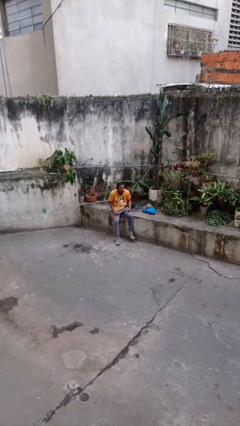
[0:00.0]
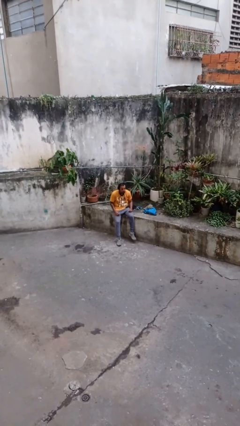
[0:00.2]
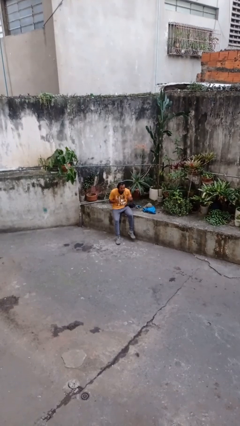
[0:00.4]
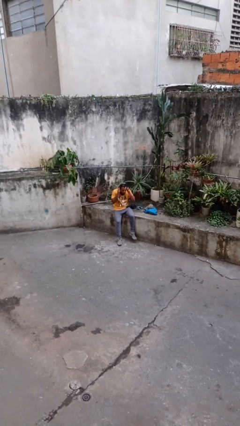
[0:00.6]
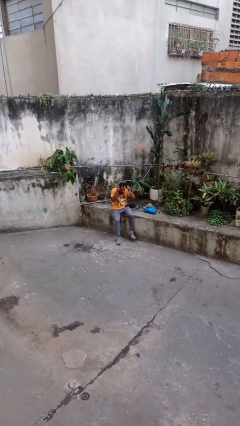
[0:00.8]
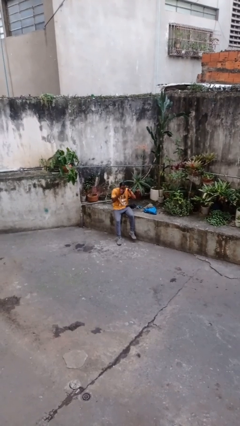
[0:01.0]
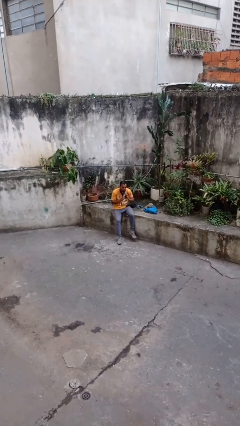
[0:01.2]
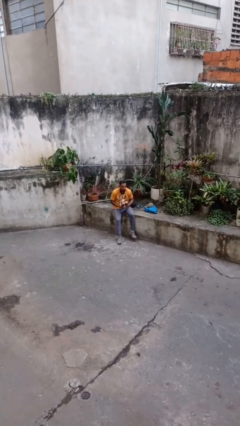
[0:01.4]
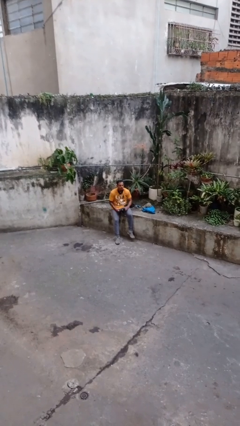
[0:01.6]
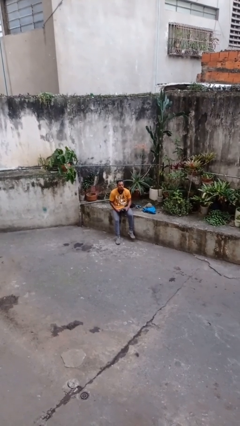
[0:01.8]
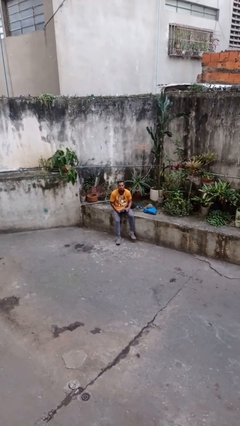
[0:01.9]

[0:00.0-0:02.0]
person takes off headphones

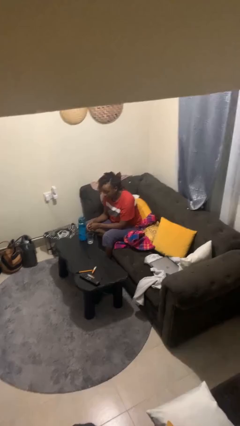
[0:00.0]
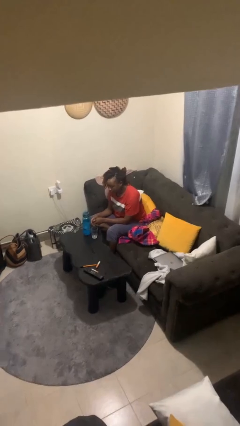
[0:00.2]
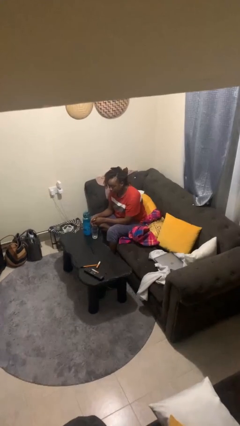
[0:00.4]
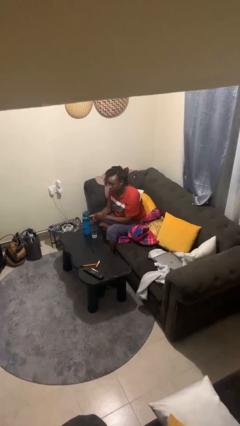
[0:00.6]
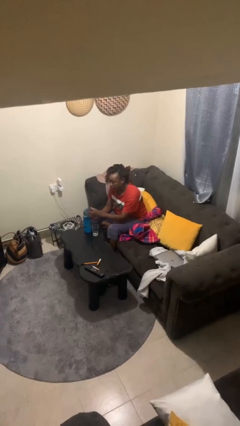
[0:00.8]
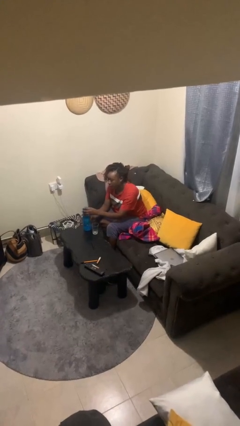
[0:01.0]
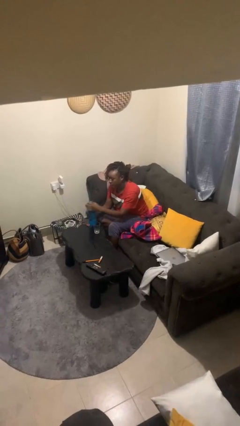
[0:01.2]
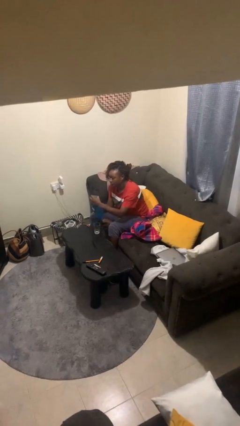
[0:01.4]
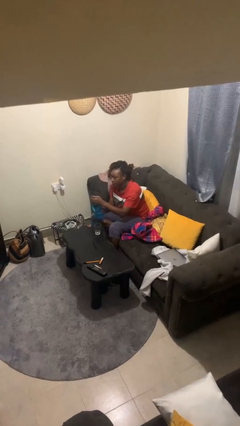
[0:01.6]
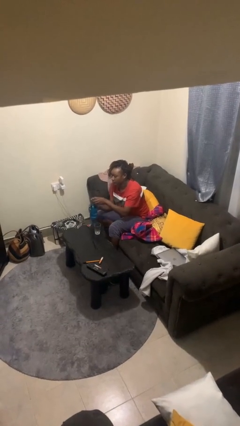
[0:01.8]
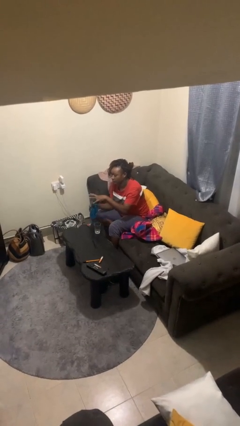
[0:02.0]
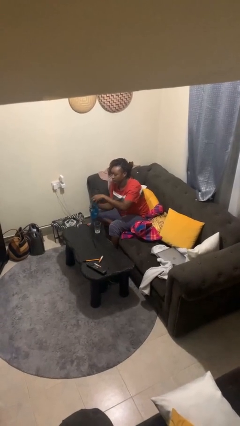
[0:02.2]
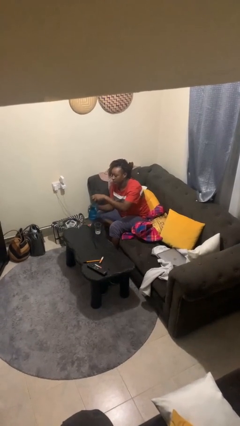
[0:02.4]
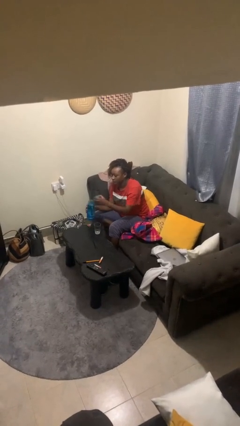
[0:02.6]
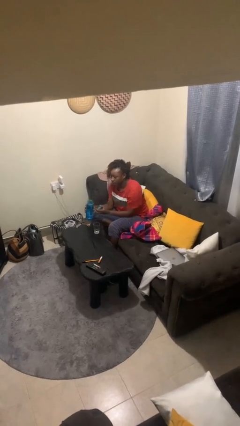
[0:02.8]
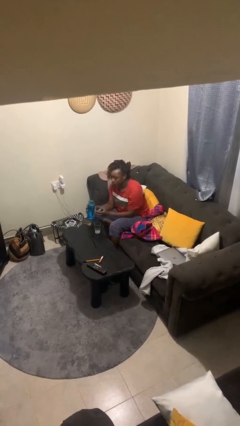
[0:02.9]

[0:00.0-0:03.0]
person unscrews lid from bottle

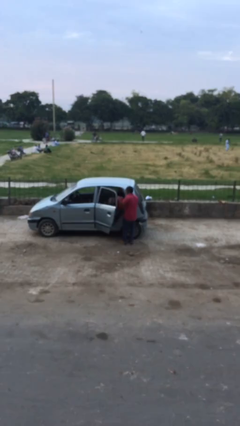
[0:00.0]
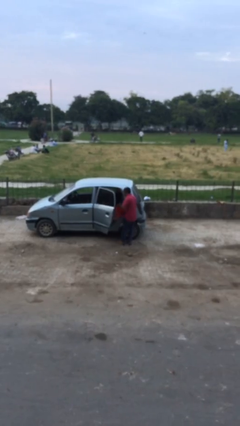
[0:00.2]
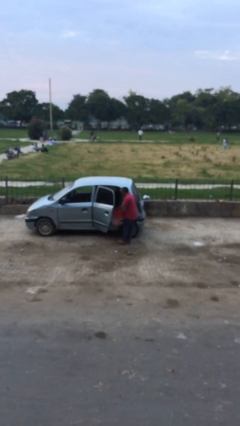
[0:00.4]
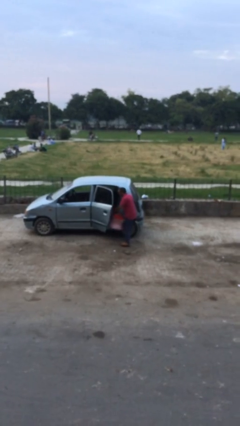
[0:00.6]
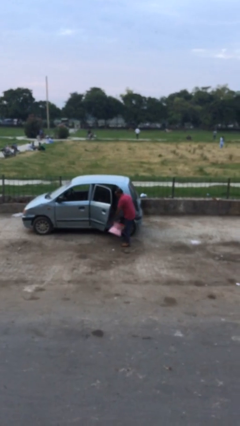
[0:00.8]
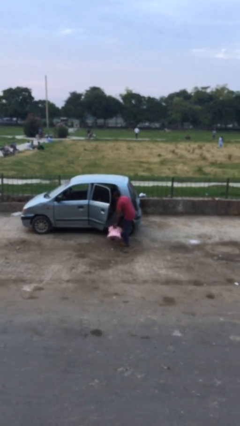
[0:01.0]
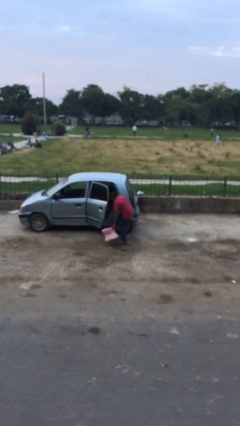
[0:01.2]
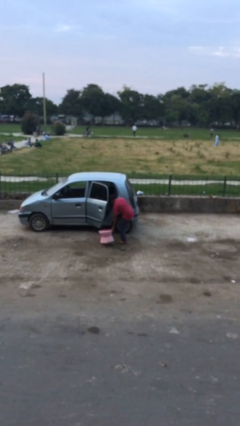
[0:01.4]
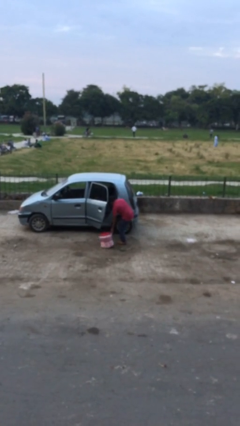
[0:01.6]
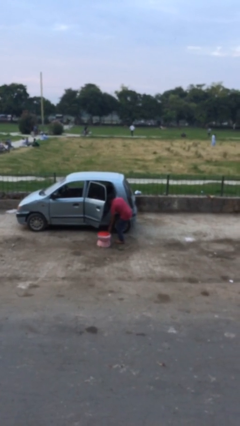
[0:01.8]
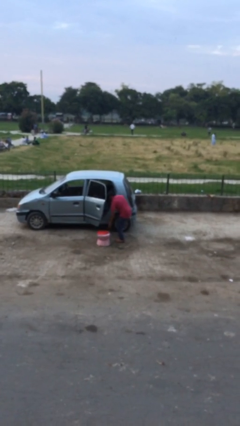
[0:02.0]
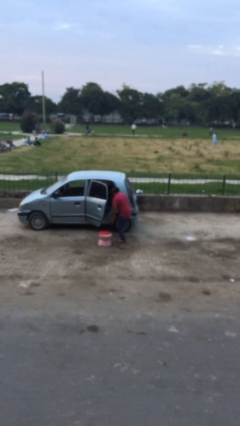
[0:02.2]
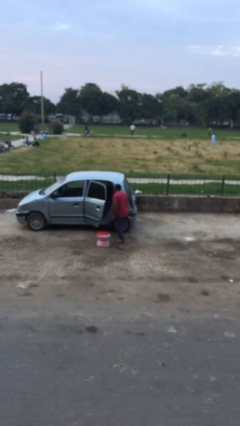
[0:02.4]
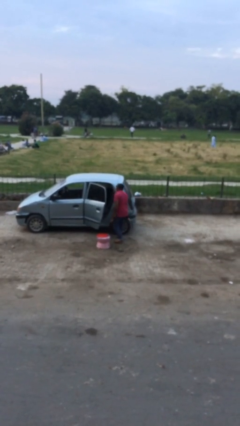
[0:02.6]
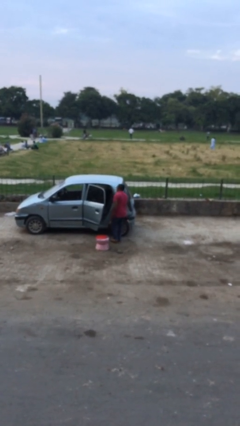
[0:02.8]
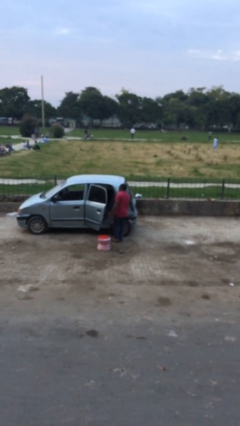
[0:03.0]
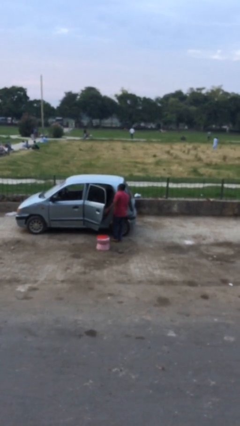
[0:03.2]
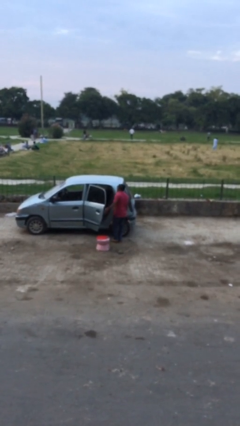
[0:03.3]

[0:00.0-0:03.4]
person unloads car

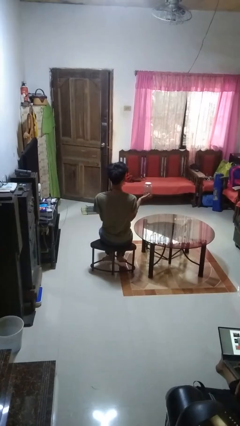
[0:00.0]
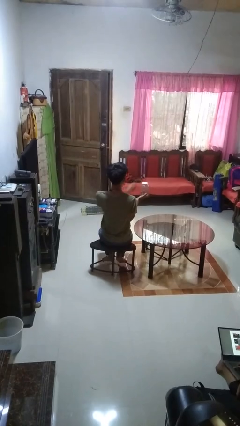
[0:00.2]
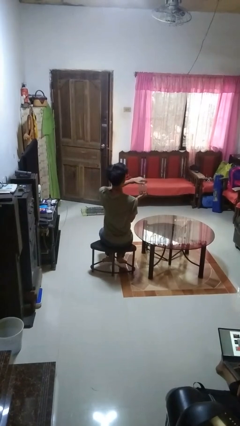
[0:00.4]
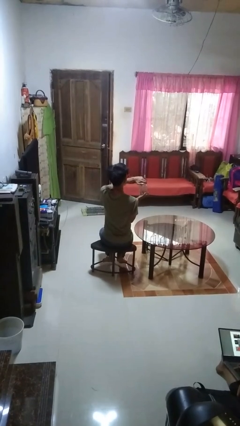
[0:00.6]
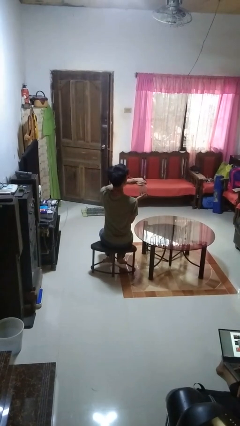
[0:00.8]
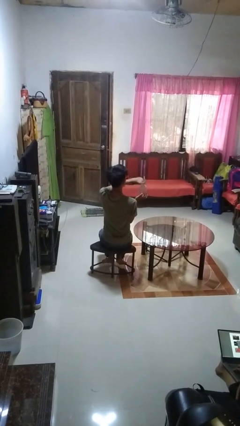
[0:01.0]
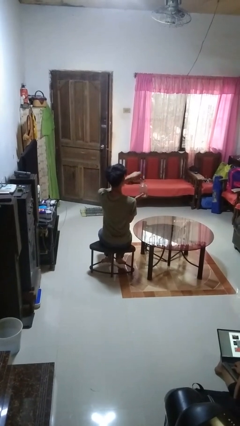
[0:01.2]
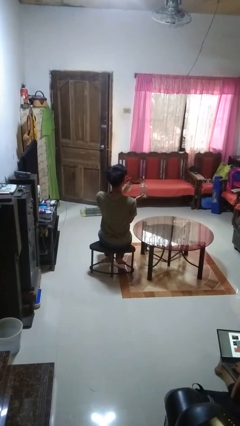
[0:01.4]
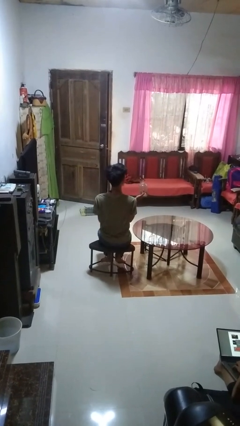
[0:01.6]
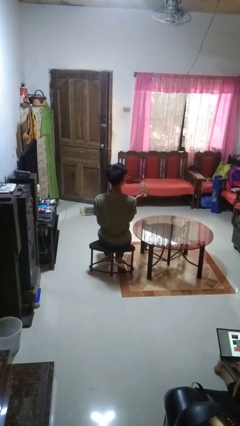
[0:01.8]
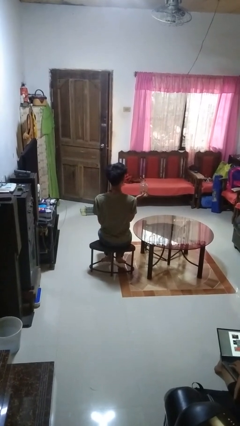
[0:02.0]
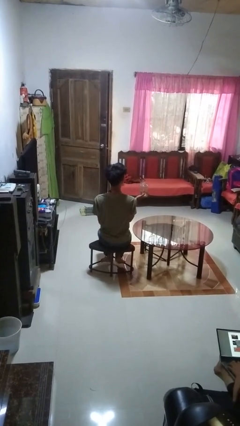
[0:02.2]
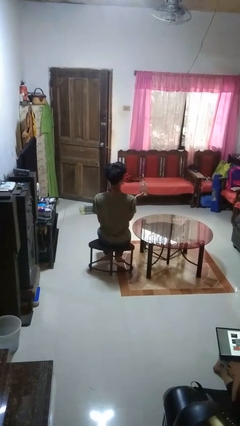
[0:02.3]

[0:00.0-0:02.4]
person opens jar

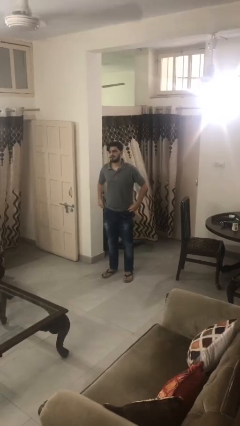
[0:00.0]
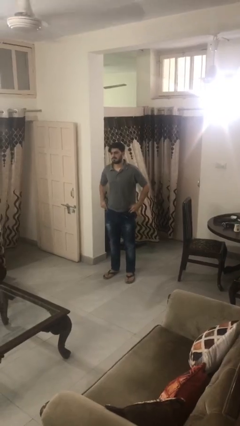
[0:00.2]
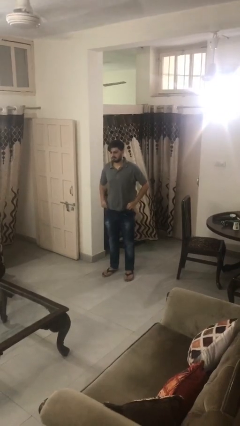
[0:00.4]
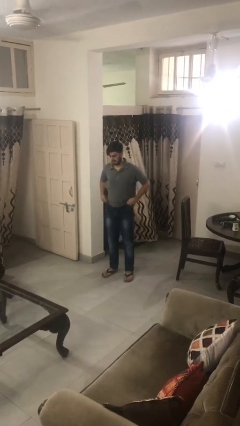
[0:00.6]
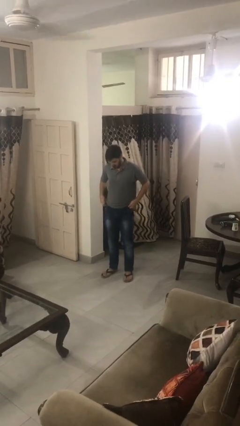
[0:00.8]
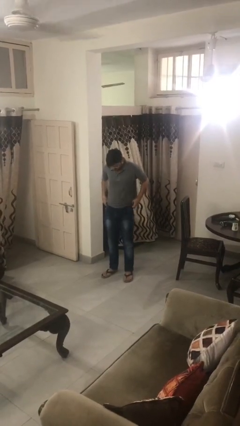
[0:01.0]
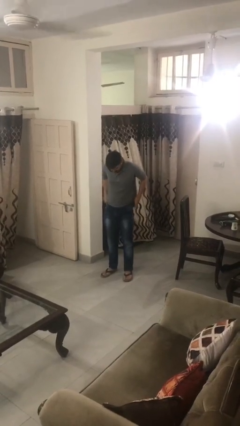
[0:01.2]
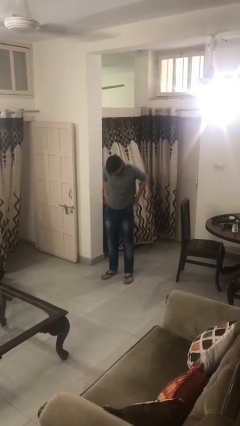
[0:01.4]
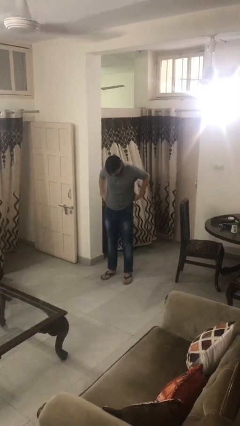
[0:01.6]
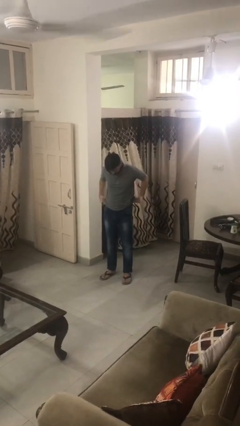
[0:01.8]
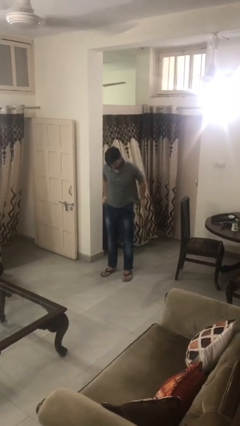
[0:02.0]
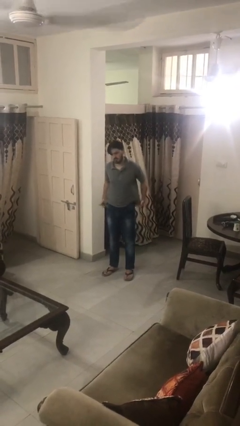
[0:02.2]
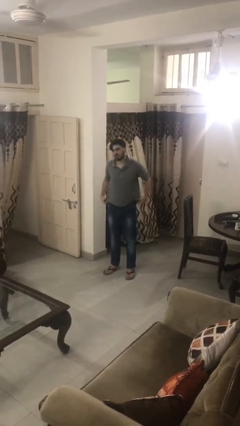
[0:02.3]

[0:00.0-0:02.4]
person hikes up pants

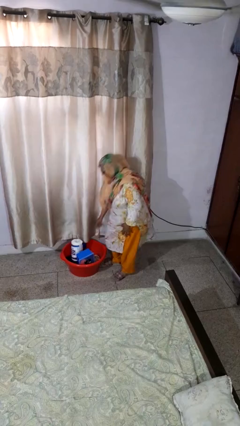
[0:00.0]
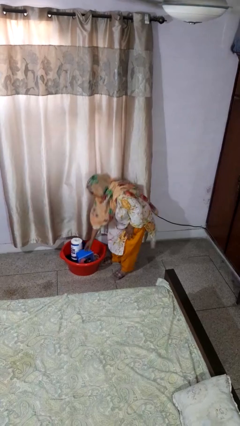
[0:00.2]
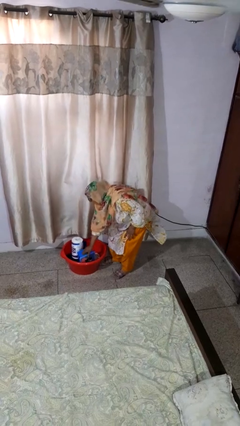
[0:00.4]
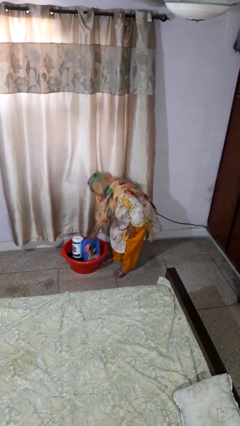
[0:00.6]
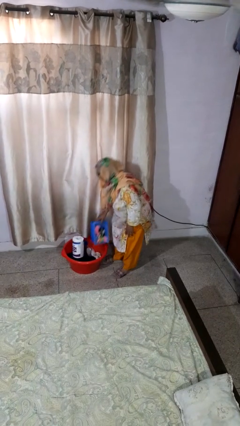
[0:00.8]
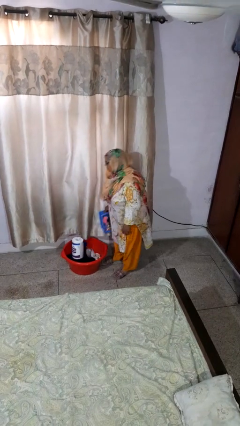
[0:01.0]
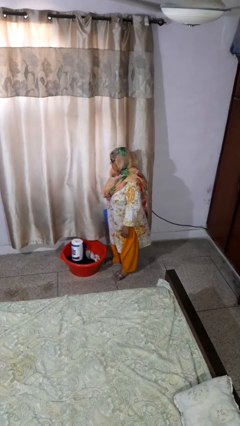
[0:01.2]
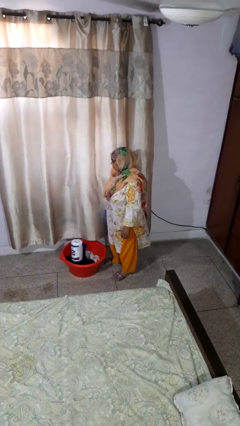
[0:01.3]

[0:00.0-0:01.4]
person takes object from basket

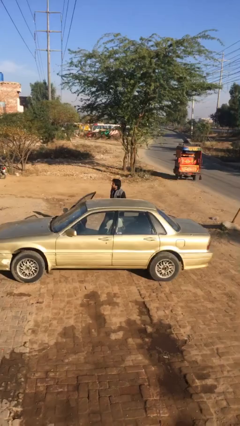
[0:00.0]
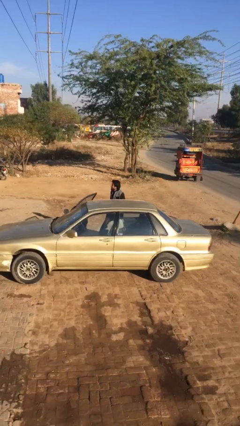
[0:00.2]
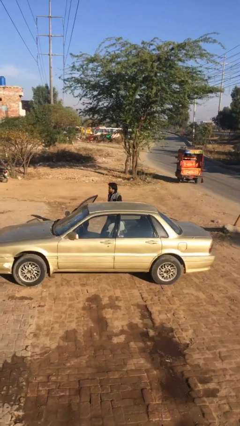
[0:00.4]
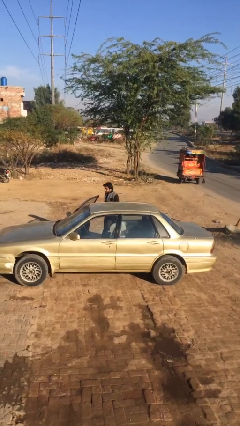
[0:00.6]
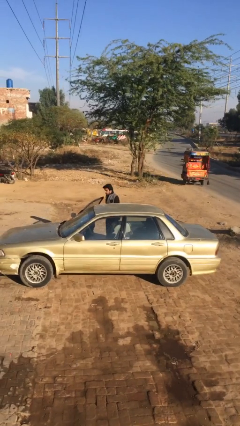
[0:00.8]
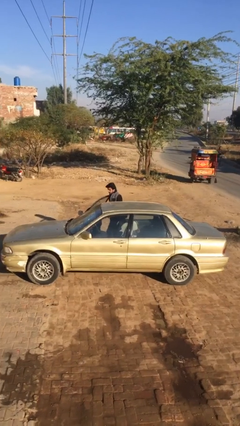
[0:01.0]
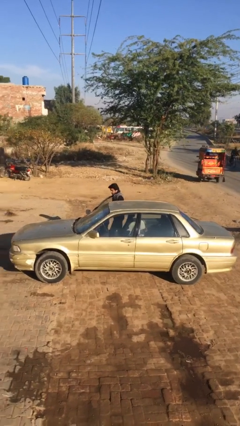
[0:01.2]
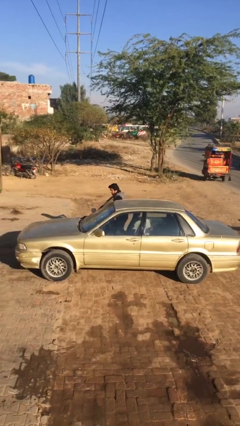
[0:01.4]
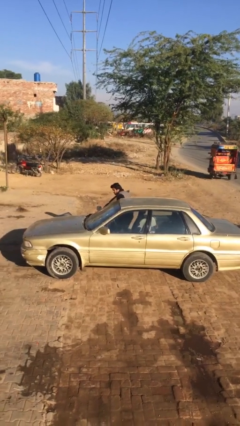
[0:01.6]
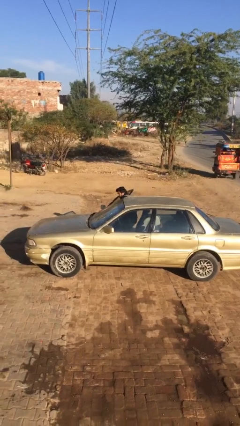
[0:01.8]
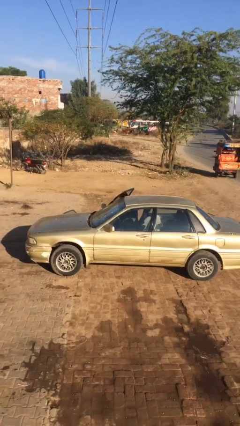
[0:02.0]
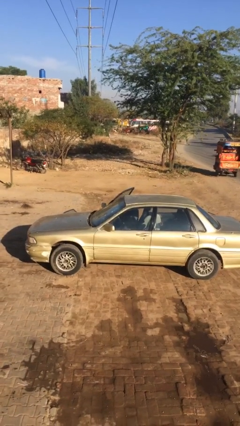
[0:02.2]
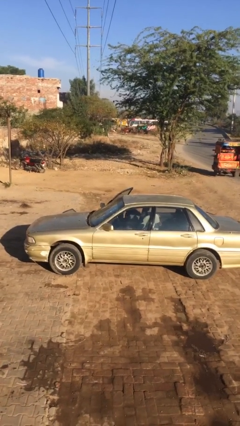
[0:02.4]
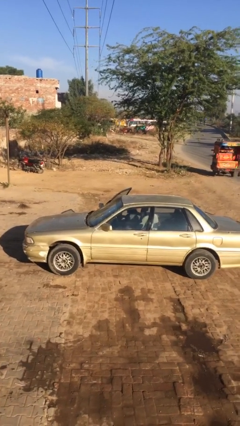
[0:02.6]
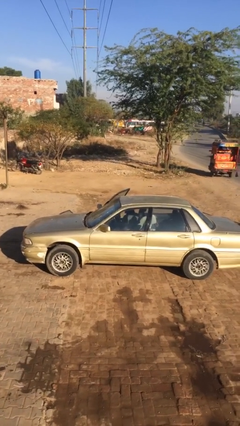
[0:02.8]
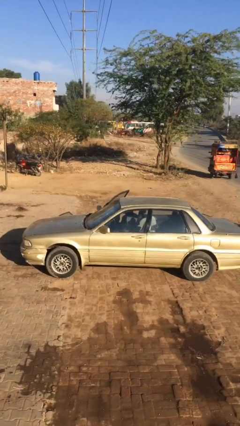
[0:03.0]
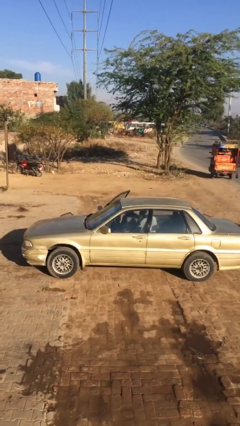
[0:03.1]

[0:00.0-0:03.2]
person enters car
